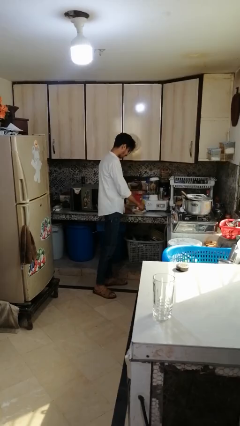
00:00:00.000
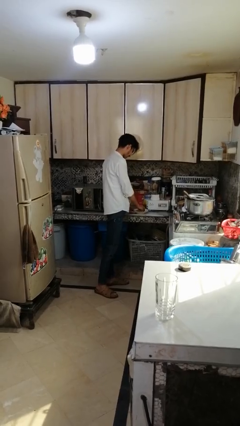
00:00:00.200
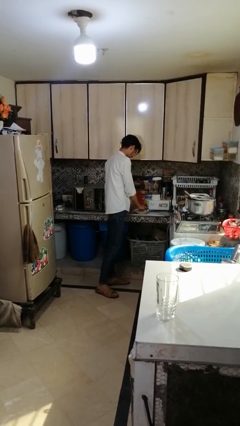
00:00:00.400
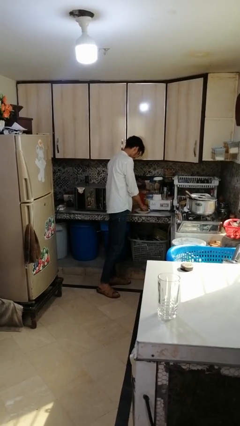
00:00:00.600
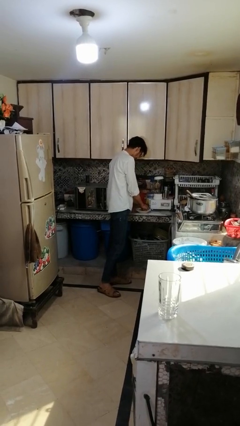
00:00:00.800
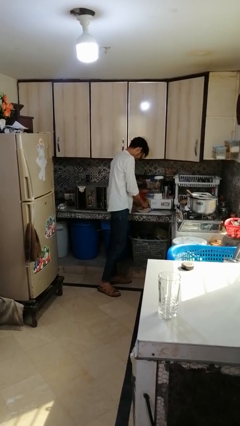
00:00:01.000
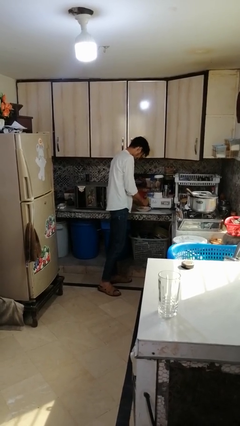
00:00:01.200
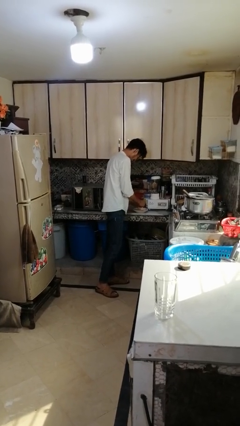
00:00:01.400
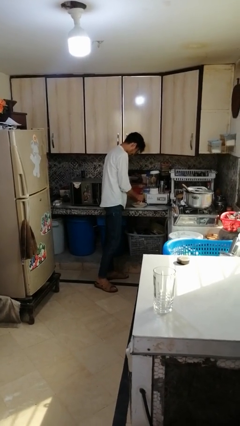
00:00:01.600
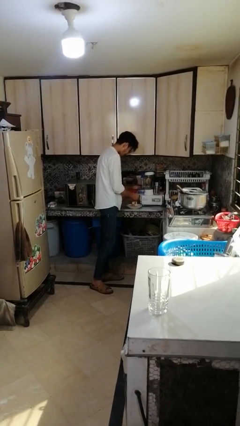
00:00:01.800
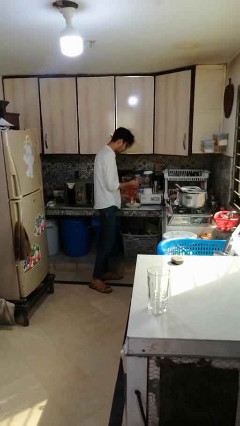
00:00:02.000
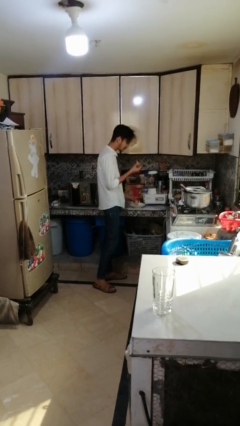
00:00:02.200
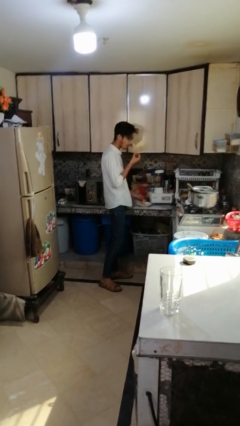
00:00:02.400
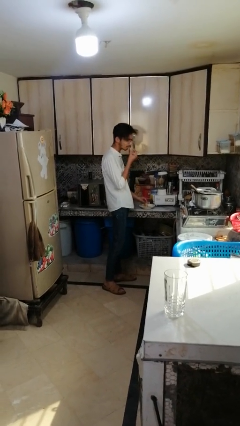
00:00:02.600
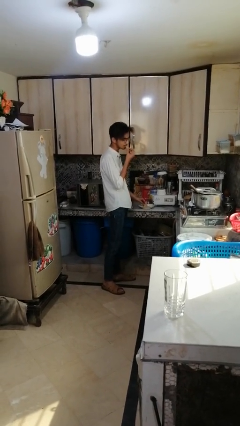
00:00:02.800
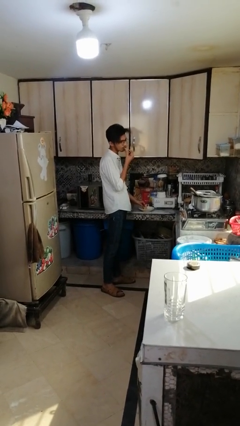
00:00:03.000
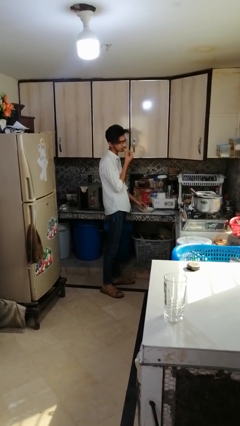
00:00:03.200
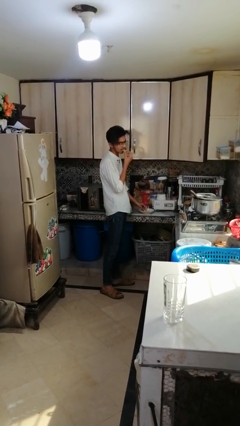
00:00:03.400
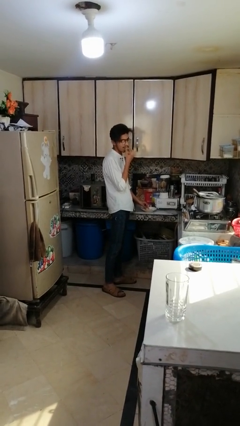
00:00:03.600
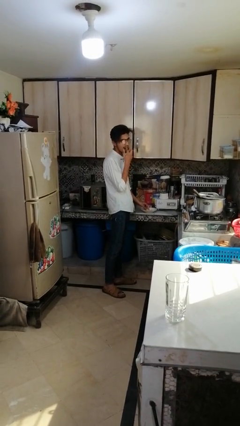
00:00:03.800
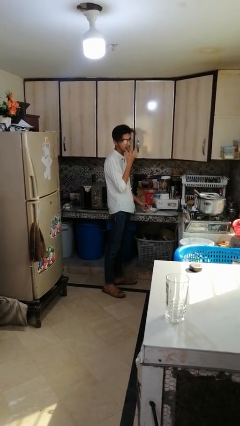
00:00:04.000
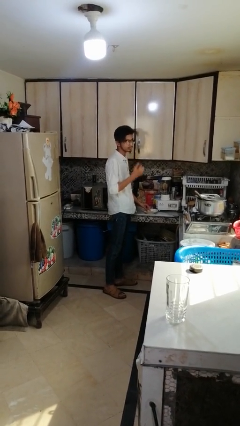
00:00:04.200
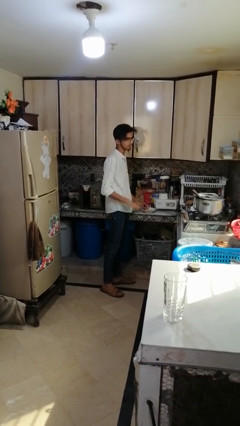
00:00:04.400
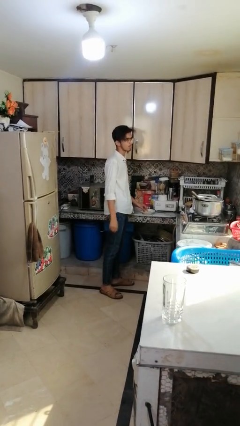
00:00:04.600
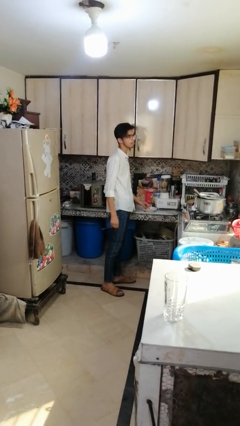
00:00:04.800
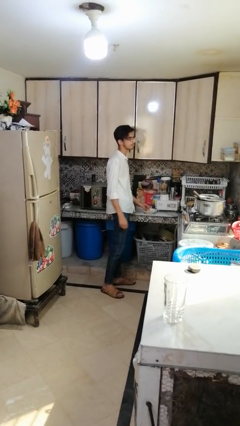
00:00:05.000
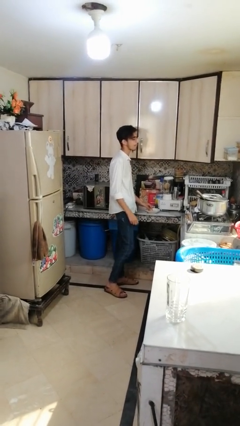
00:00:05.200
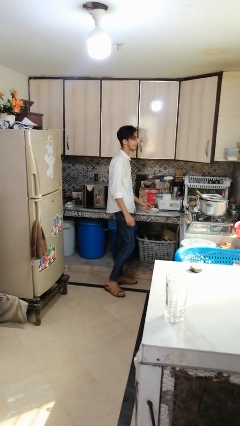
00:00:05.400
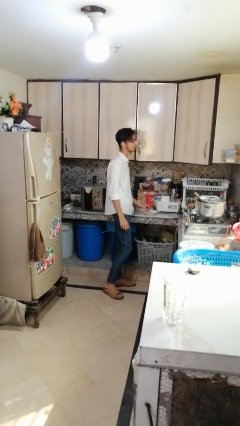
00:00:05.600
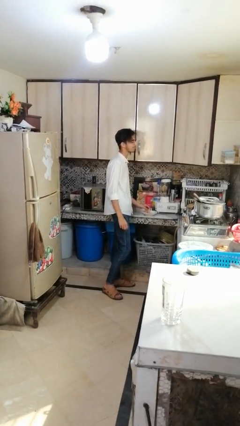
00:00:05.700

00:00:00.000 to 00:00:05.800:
person eats with hands

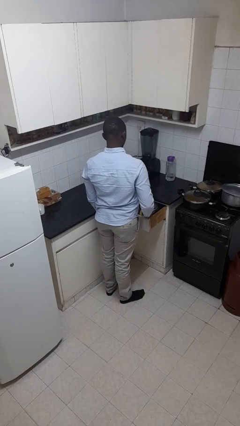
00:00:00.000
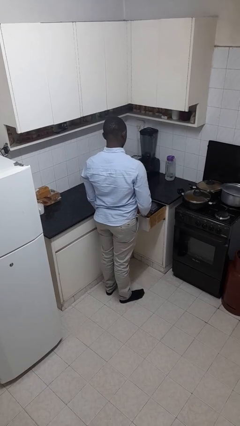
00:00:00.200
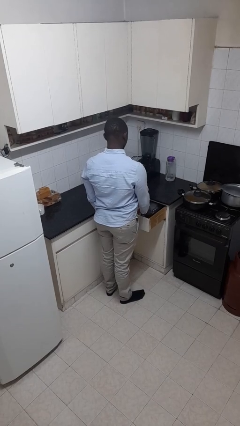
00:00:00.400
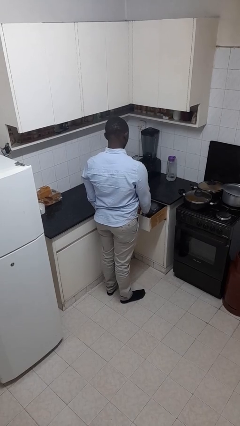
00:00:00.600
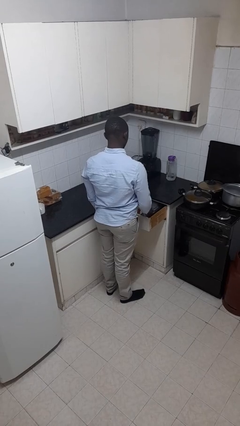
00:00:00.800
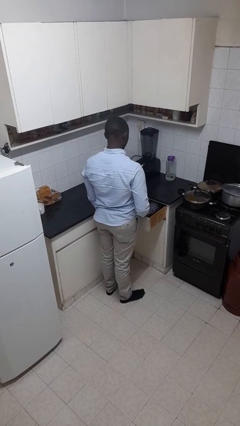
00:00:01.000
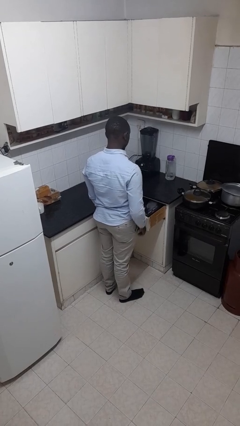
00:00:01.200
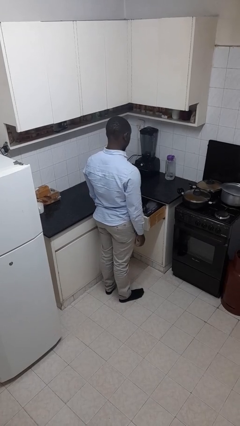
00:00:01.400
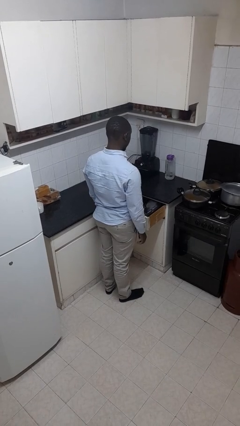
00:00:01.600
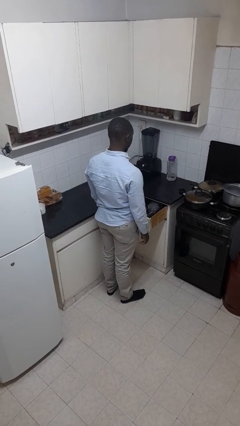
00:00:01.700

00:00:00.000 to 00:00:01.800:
person puts object into kitchen drawer

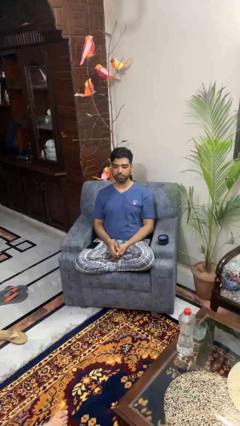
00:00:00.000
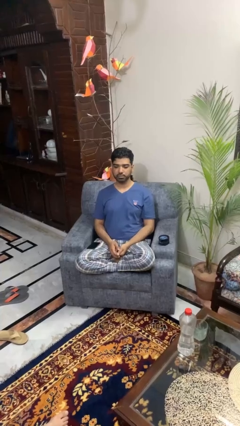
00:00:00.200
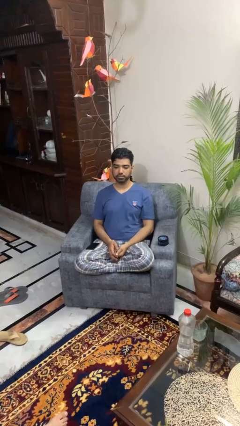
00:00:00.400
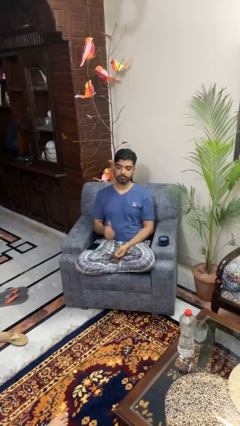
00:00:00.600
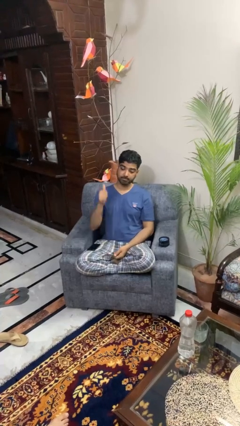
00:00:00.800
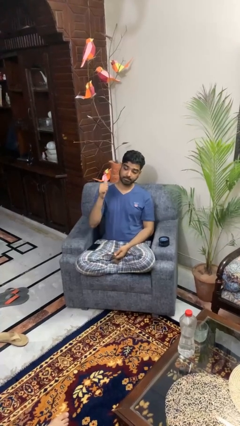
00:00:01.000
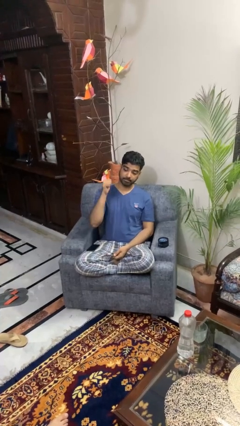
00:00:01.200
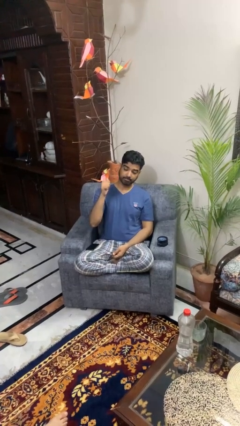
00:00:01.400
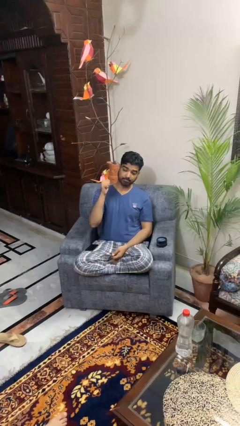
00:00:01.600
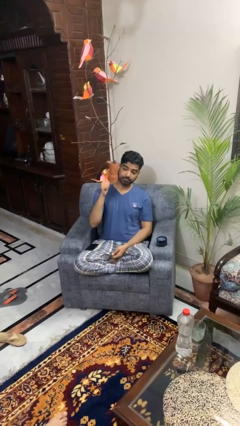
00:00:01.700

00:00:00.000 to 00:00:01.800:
person gestures behind me

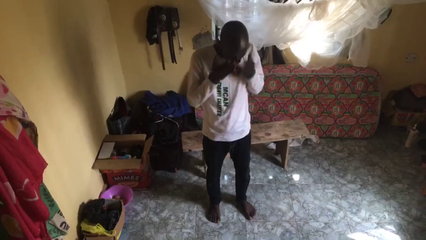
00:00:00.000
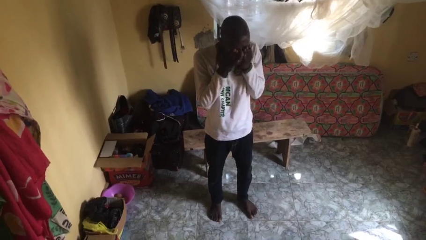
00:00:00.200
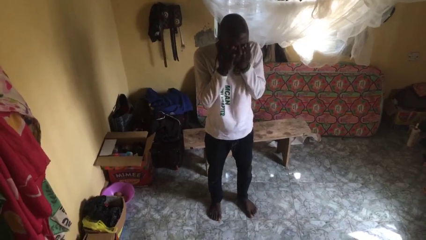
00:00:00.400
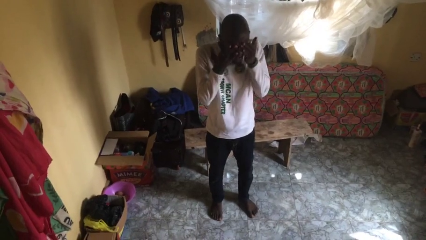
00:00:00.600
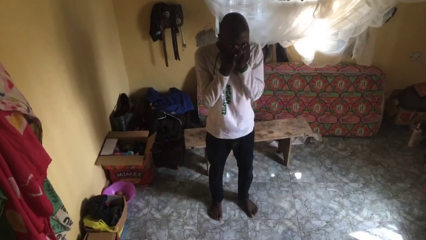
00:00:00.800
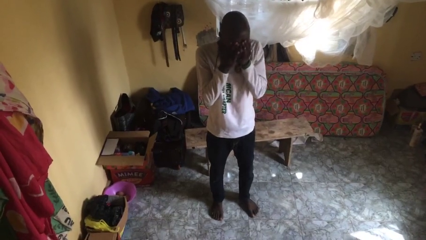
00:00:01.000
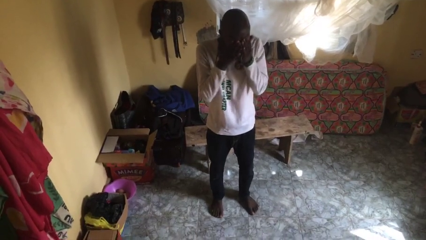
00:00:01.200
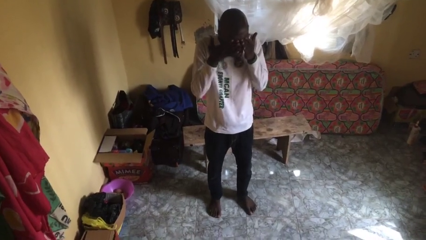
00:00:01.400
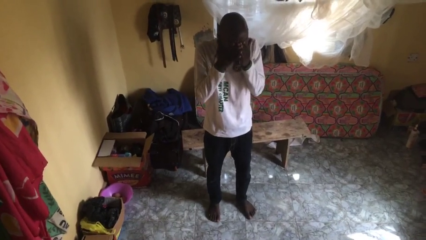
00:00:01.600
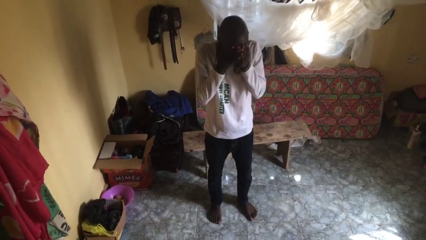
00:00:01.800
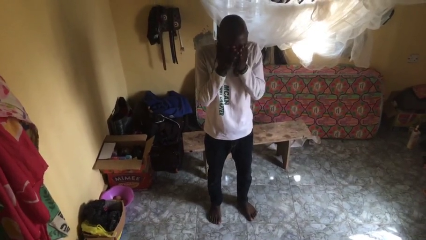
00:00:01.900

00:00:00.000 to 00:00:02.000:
person rubs eyes

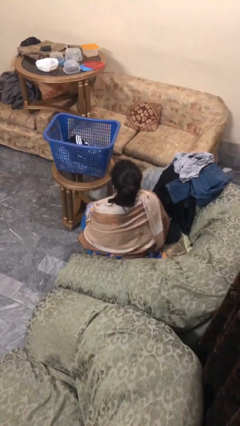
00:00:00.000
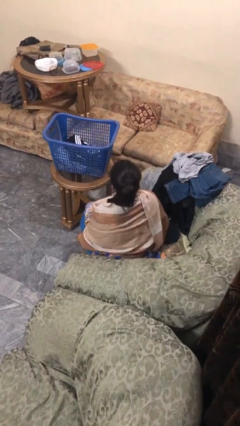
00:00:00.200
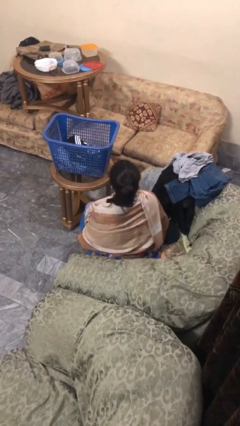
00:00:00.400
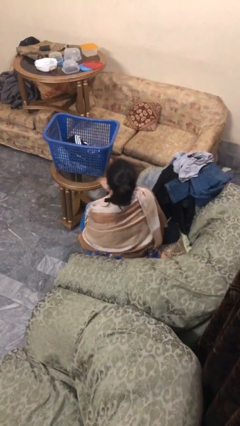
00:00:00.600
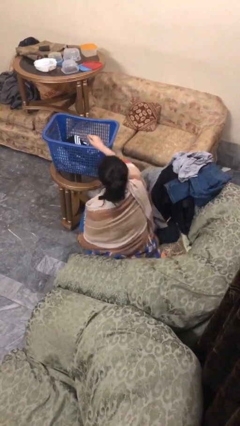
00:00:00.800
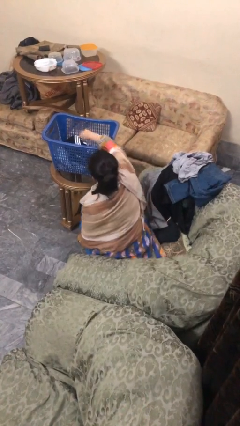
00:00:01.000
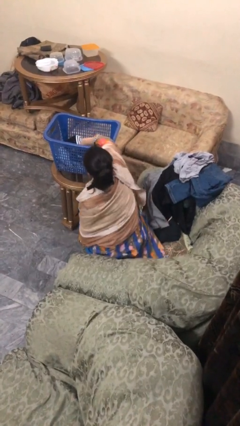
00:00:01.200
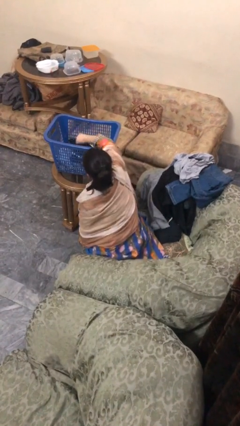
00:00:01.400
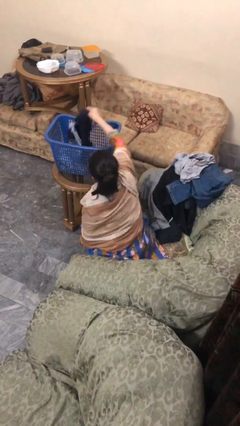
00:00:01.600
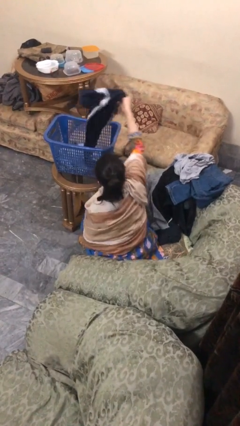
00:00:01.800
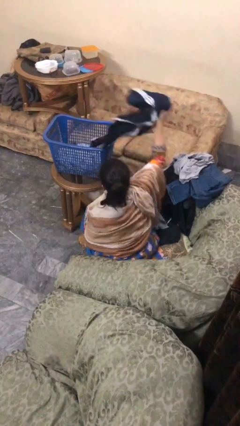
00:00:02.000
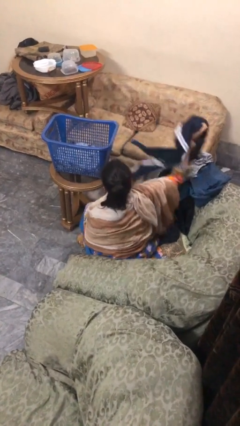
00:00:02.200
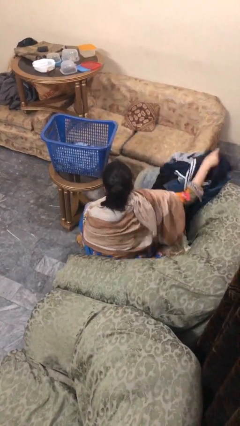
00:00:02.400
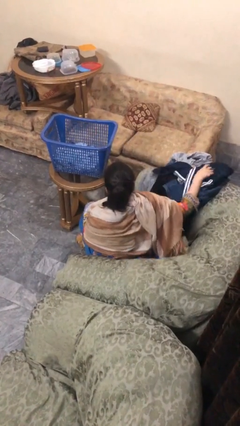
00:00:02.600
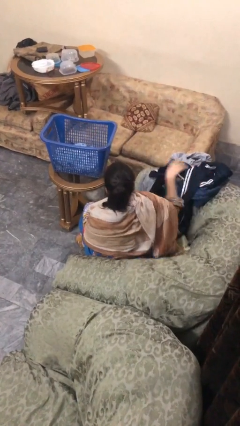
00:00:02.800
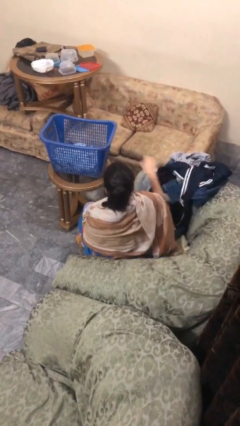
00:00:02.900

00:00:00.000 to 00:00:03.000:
person takes object from basket

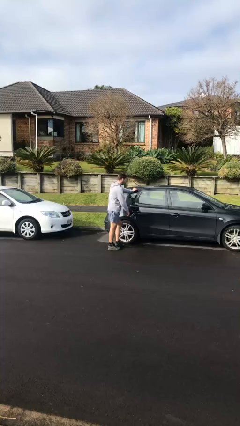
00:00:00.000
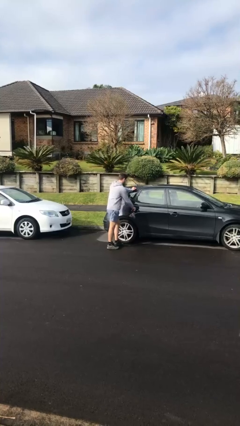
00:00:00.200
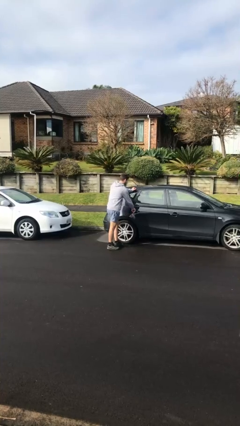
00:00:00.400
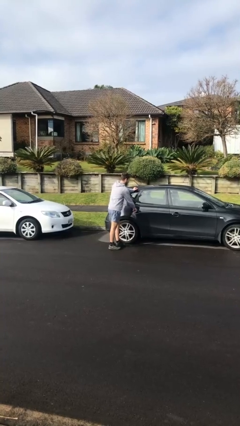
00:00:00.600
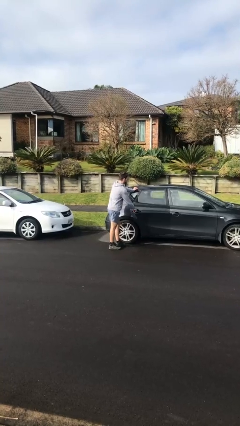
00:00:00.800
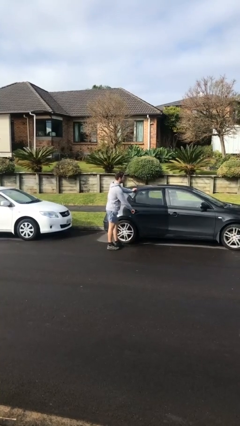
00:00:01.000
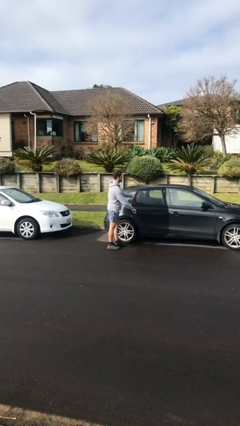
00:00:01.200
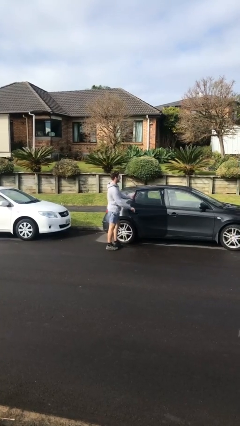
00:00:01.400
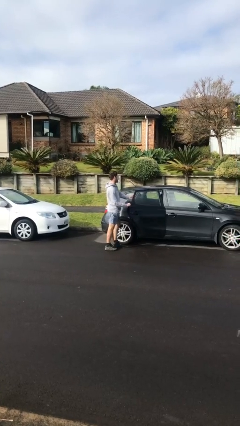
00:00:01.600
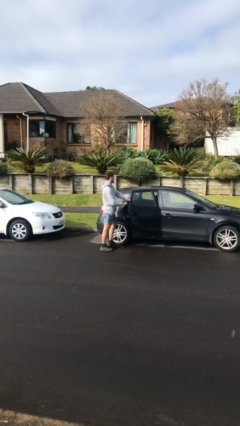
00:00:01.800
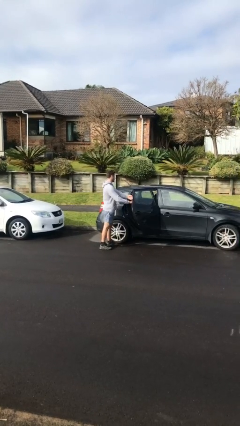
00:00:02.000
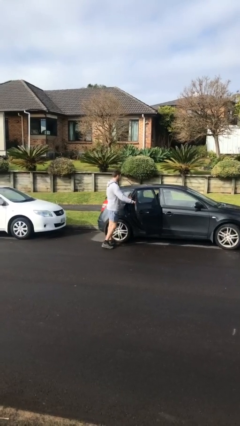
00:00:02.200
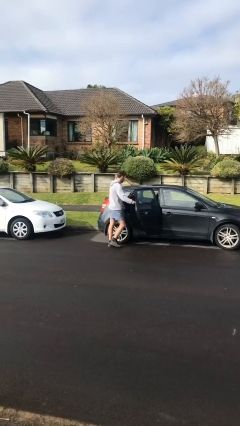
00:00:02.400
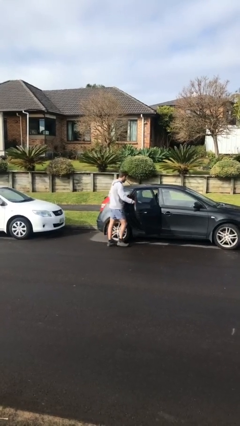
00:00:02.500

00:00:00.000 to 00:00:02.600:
person opens car door

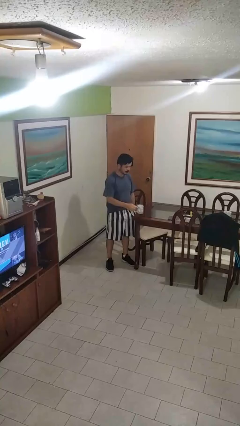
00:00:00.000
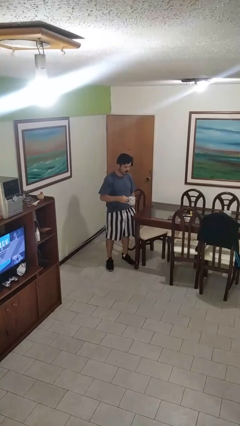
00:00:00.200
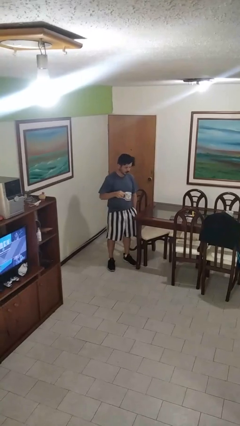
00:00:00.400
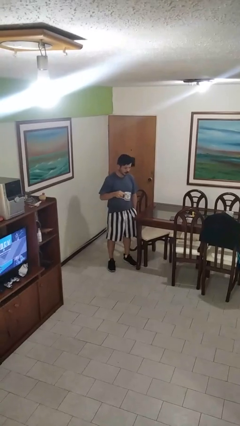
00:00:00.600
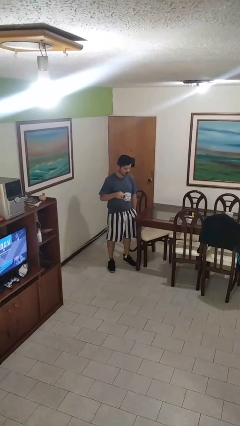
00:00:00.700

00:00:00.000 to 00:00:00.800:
person picks up object from table
